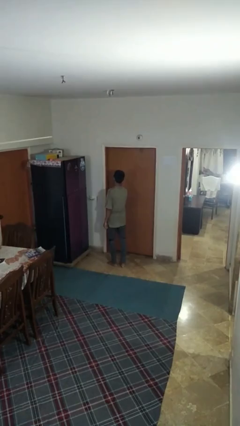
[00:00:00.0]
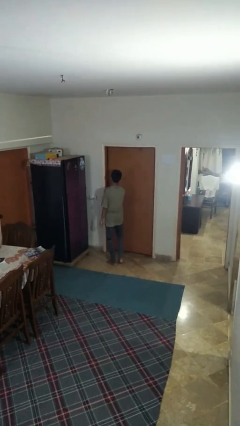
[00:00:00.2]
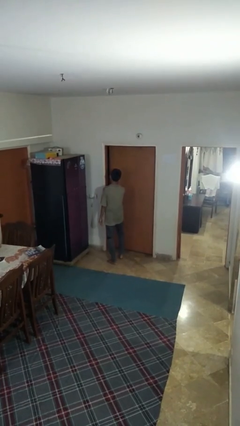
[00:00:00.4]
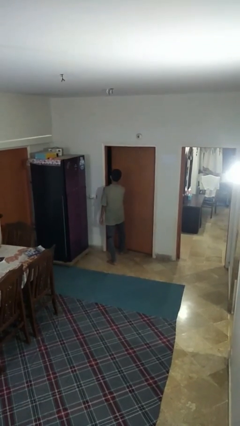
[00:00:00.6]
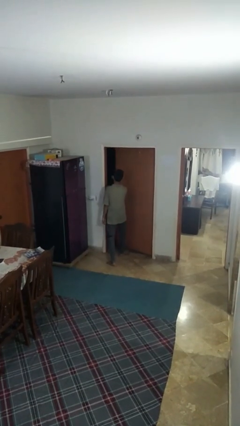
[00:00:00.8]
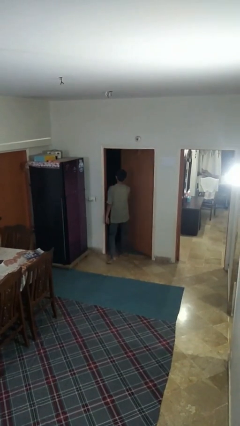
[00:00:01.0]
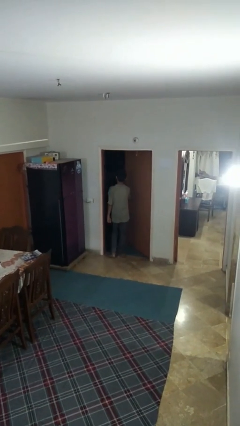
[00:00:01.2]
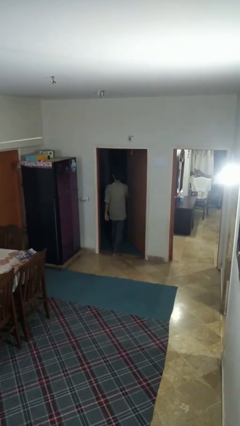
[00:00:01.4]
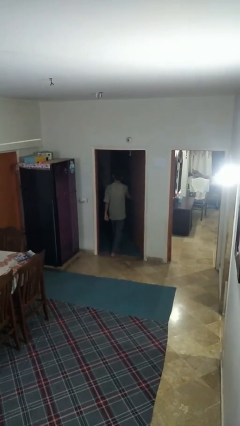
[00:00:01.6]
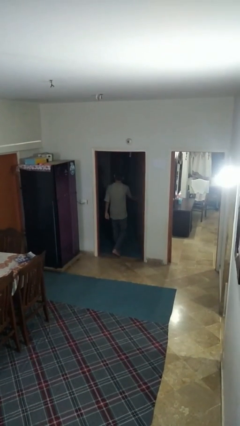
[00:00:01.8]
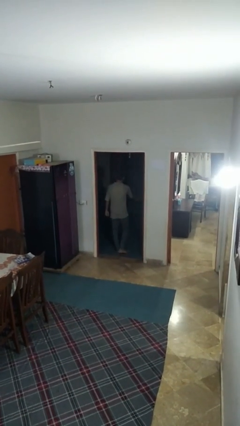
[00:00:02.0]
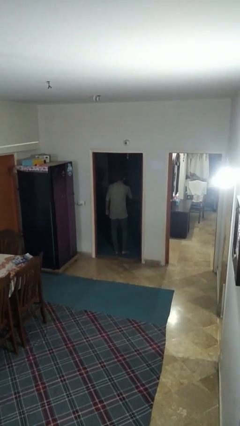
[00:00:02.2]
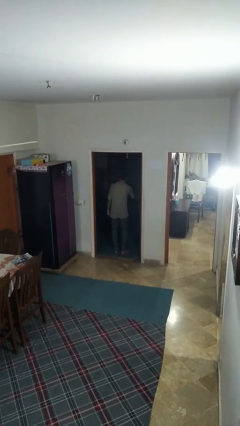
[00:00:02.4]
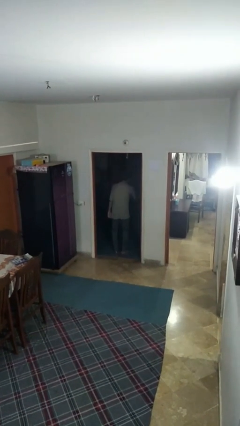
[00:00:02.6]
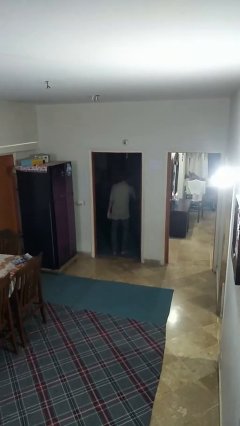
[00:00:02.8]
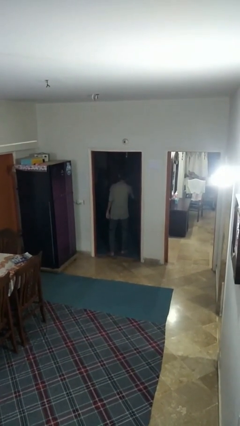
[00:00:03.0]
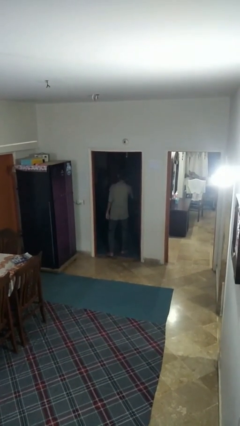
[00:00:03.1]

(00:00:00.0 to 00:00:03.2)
person opens facility door

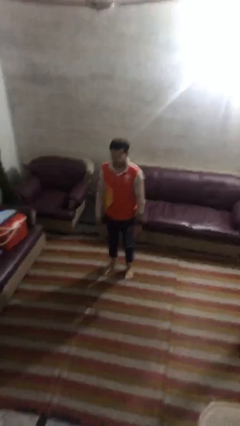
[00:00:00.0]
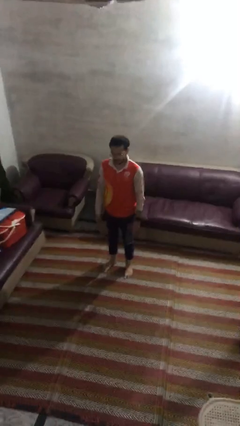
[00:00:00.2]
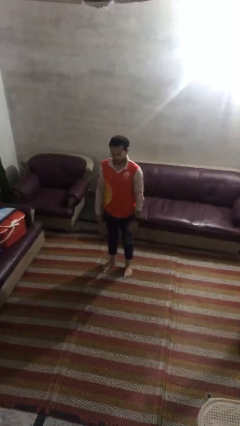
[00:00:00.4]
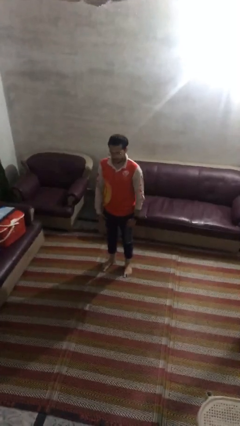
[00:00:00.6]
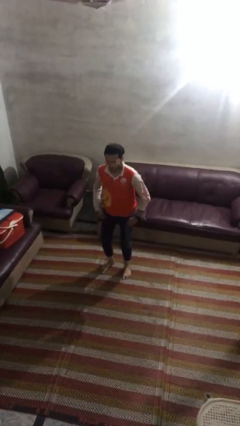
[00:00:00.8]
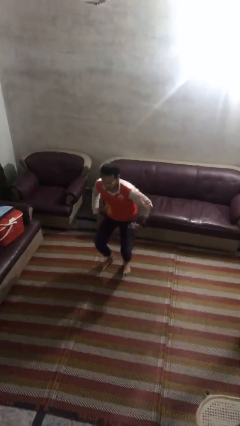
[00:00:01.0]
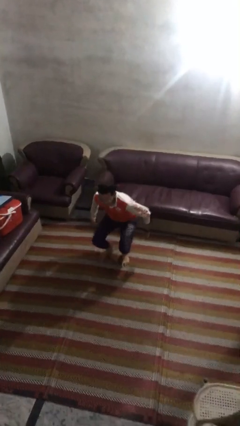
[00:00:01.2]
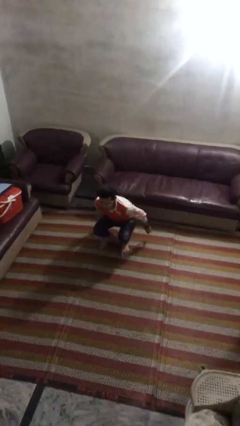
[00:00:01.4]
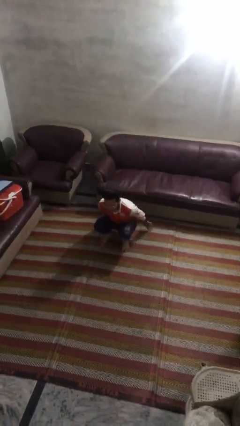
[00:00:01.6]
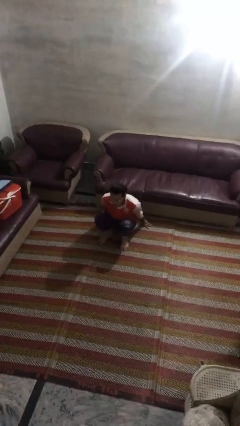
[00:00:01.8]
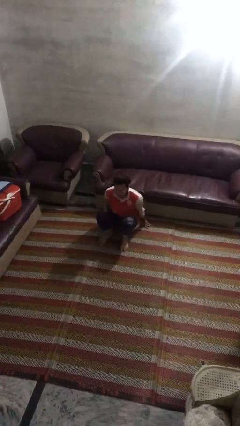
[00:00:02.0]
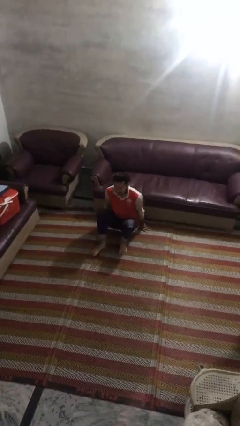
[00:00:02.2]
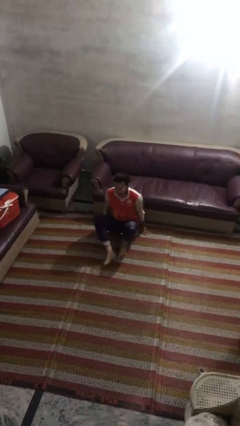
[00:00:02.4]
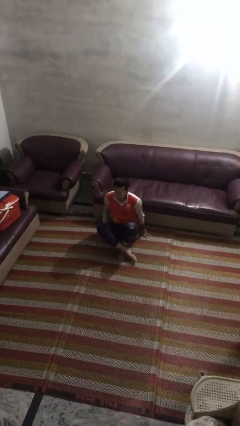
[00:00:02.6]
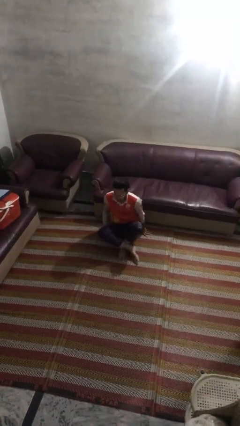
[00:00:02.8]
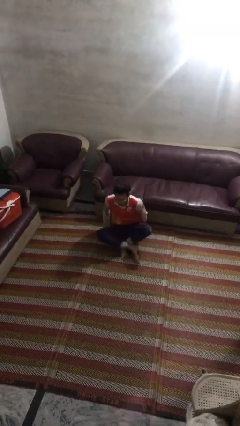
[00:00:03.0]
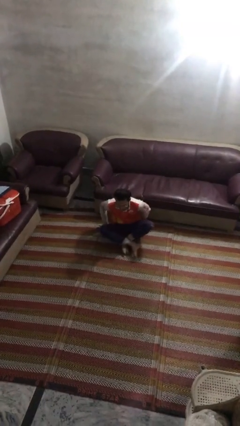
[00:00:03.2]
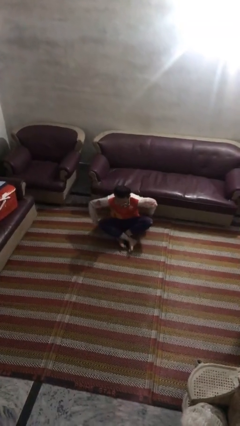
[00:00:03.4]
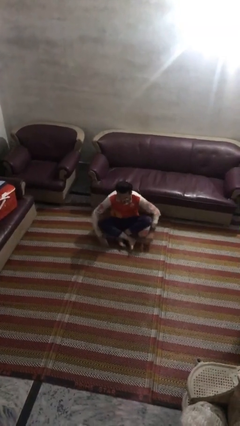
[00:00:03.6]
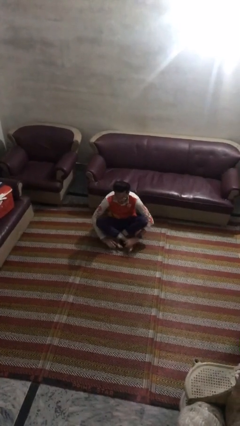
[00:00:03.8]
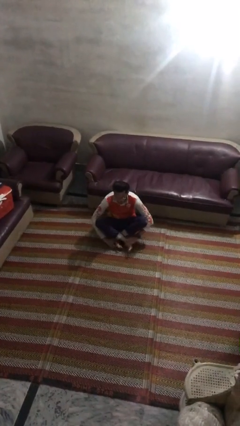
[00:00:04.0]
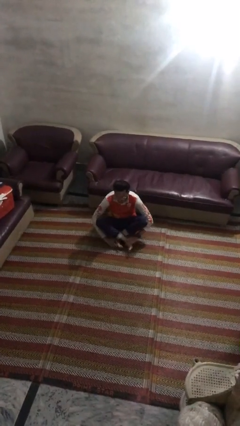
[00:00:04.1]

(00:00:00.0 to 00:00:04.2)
person sits crisscross

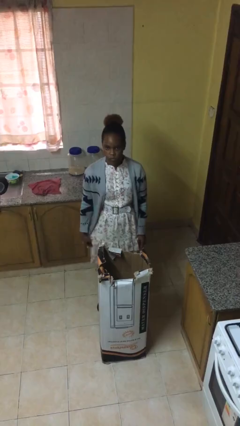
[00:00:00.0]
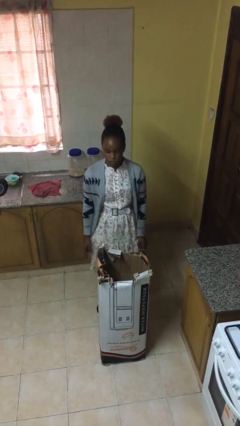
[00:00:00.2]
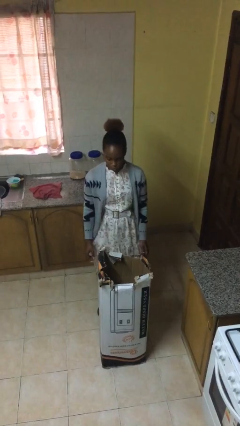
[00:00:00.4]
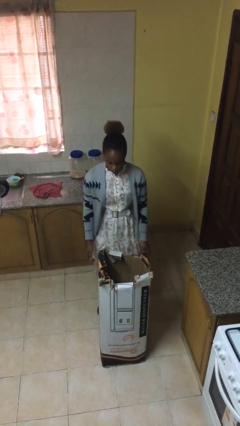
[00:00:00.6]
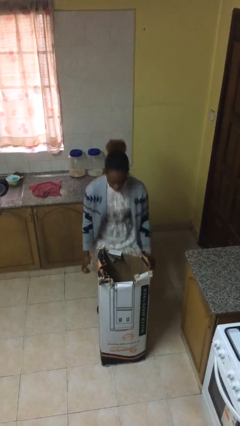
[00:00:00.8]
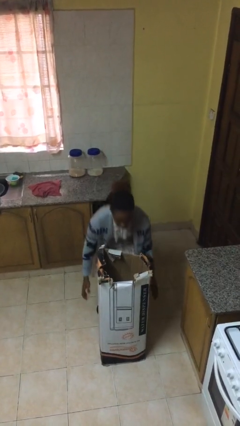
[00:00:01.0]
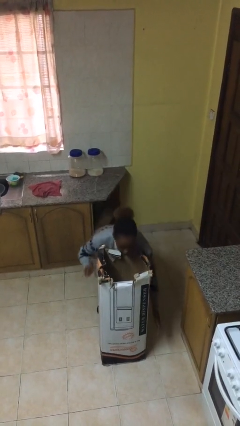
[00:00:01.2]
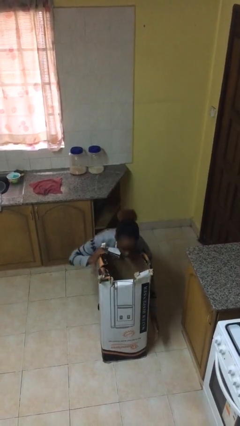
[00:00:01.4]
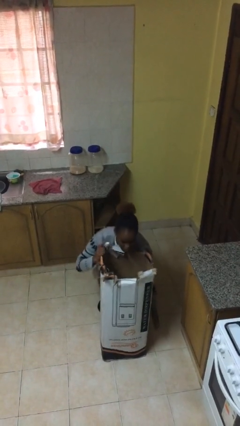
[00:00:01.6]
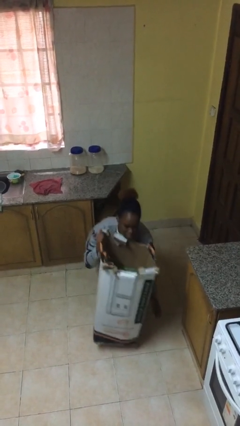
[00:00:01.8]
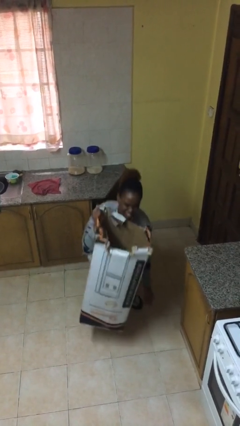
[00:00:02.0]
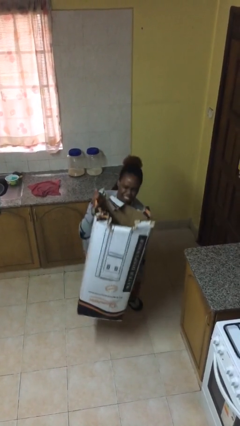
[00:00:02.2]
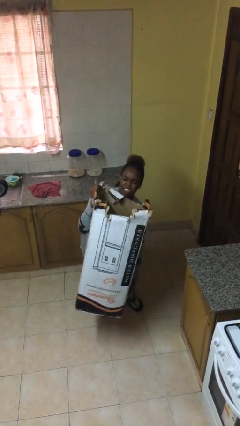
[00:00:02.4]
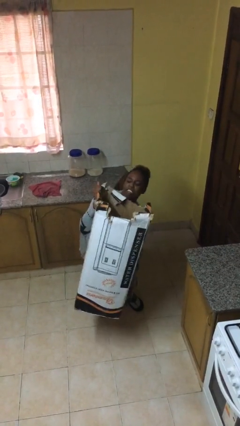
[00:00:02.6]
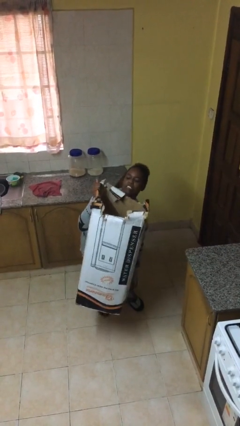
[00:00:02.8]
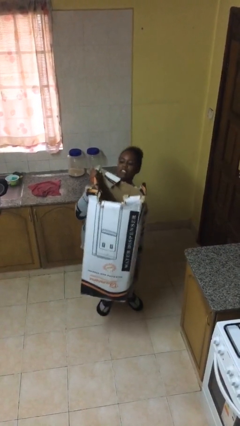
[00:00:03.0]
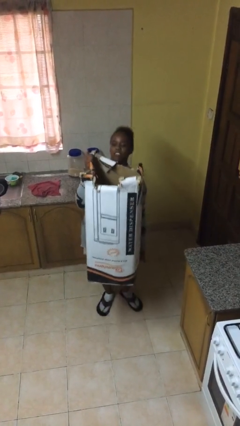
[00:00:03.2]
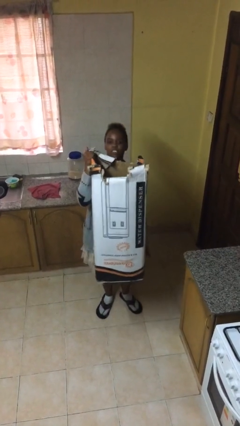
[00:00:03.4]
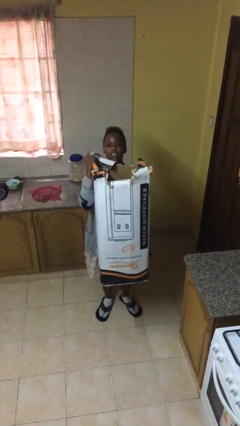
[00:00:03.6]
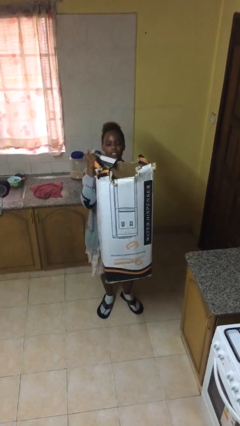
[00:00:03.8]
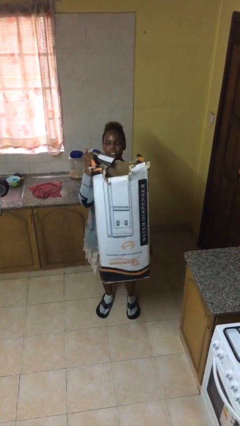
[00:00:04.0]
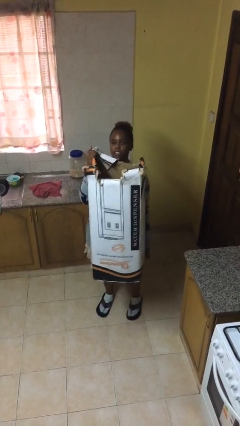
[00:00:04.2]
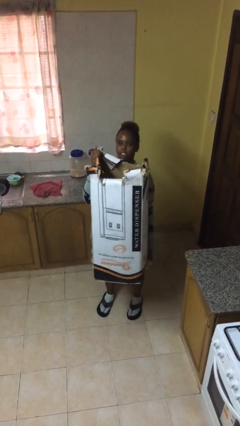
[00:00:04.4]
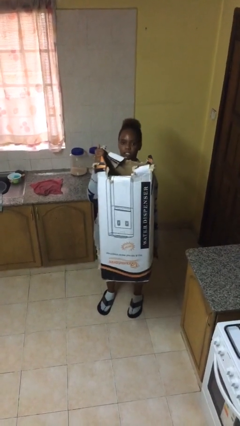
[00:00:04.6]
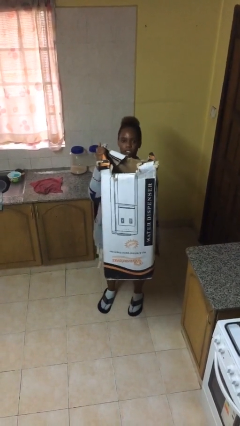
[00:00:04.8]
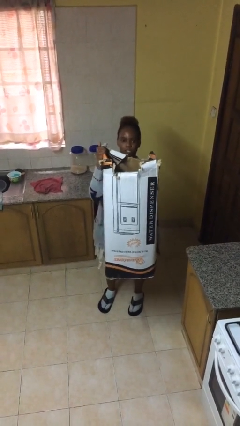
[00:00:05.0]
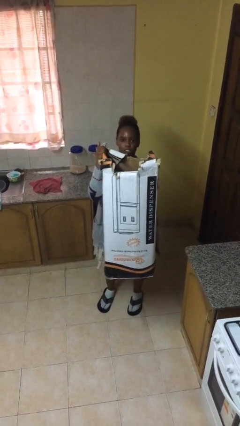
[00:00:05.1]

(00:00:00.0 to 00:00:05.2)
person picks up object from floor

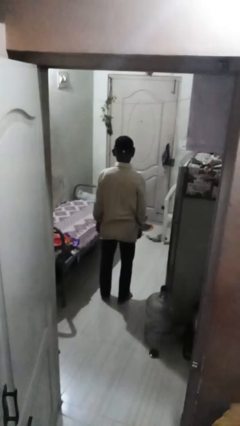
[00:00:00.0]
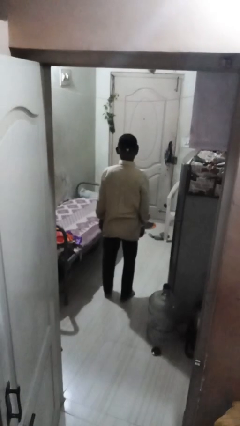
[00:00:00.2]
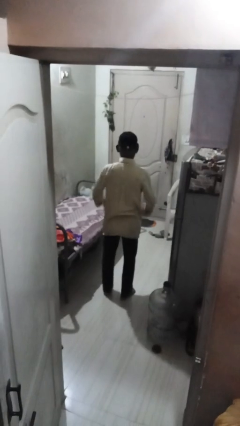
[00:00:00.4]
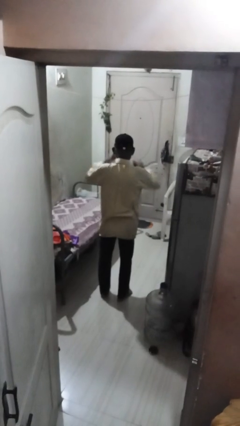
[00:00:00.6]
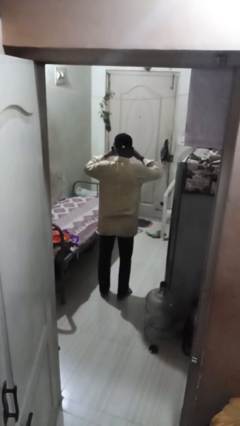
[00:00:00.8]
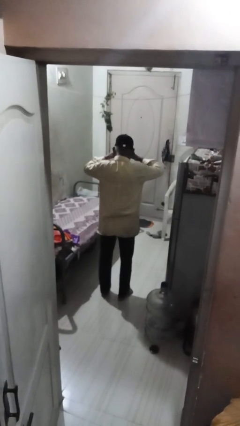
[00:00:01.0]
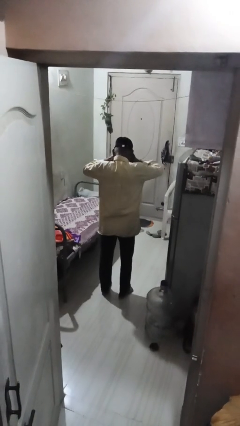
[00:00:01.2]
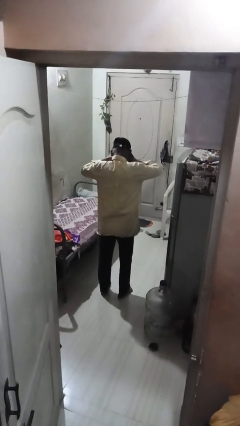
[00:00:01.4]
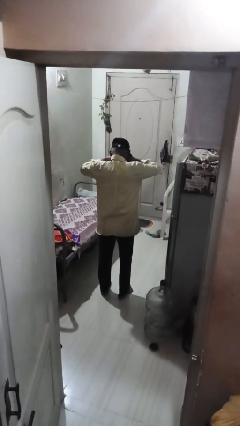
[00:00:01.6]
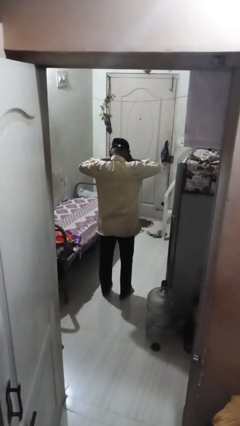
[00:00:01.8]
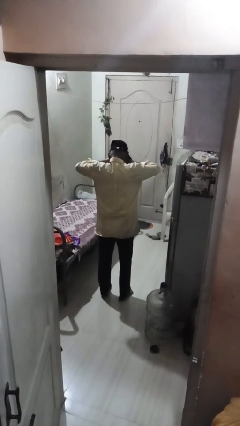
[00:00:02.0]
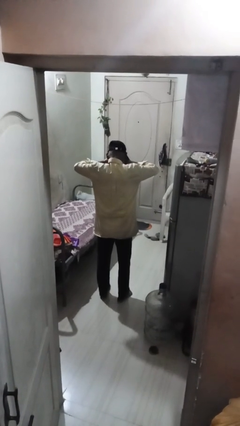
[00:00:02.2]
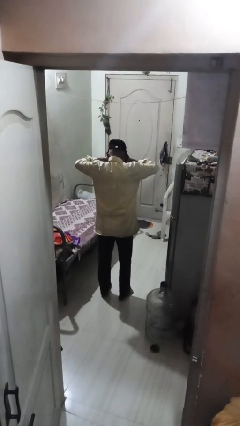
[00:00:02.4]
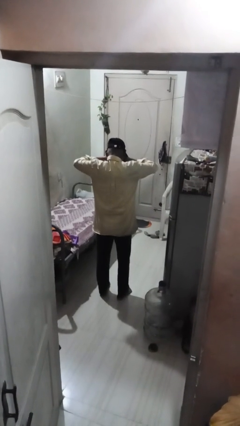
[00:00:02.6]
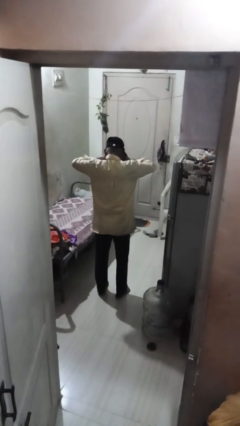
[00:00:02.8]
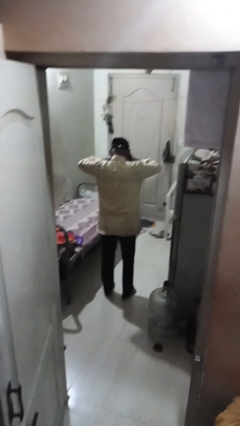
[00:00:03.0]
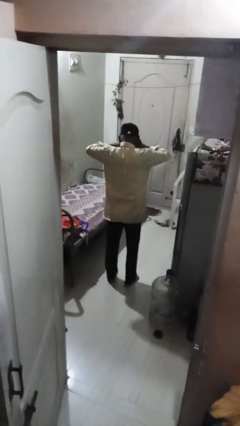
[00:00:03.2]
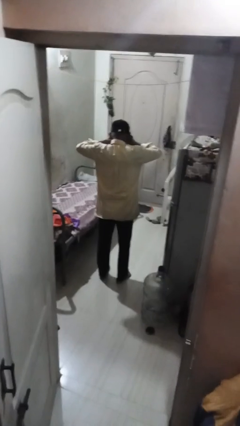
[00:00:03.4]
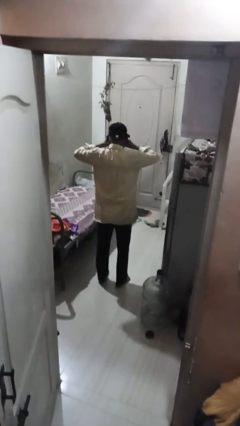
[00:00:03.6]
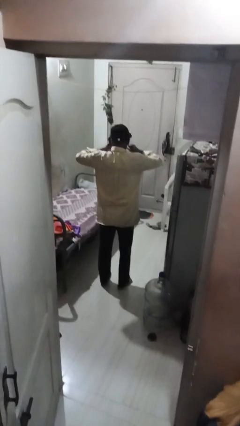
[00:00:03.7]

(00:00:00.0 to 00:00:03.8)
person rubs eyes

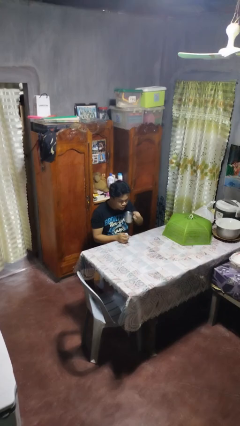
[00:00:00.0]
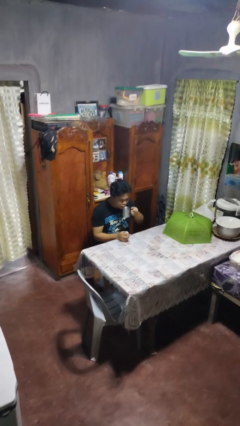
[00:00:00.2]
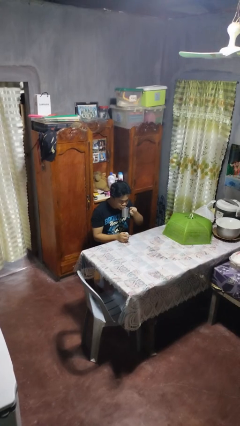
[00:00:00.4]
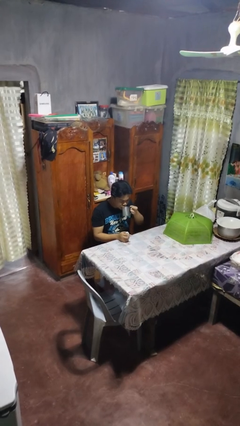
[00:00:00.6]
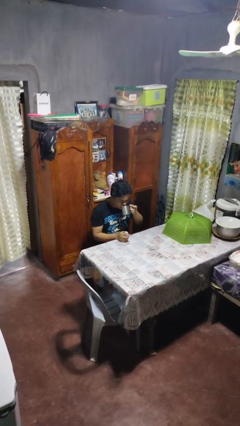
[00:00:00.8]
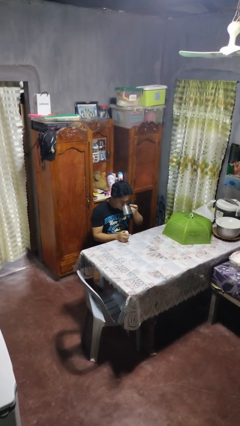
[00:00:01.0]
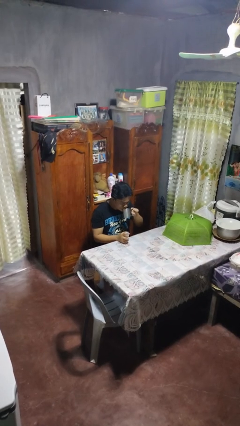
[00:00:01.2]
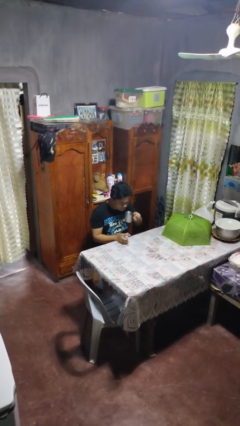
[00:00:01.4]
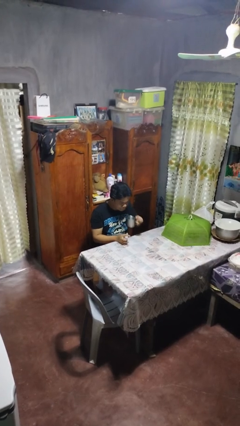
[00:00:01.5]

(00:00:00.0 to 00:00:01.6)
person drinks from cup
